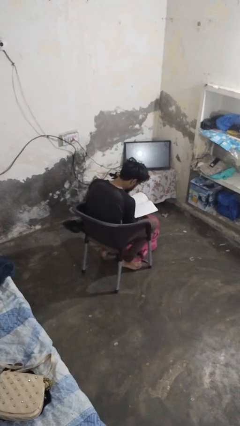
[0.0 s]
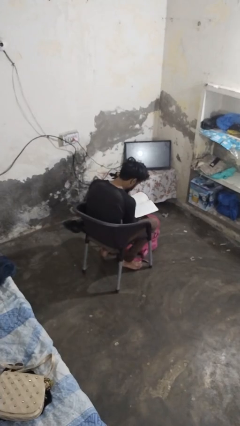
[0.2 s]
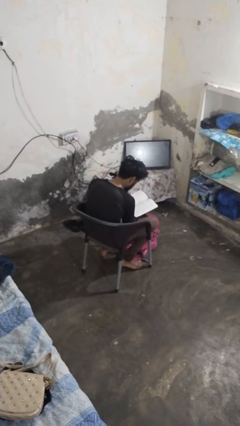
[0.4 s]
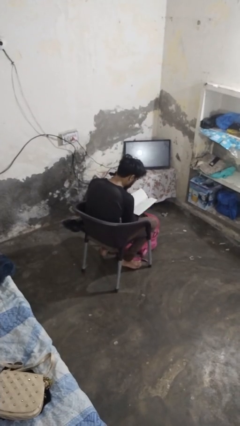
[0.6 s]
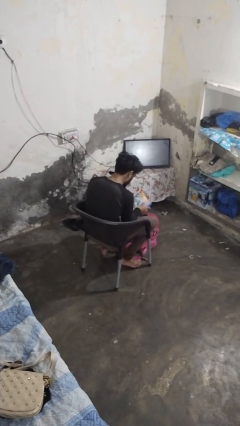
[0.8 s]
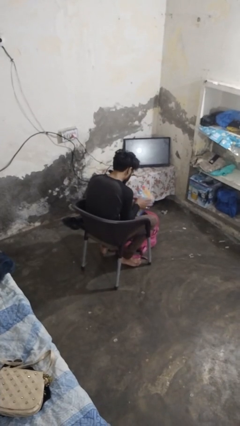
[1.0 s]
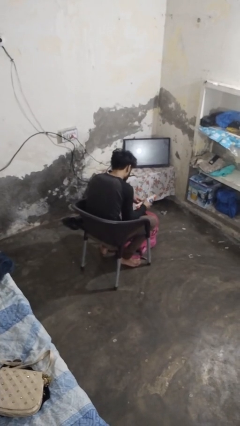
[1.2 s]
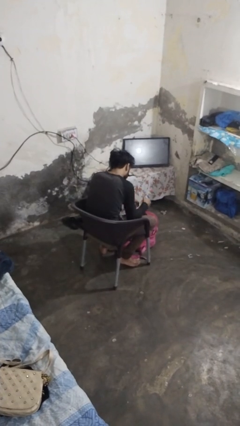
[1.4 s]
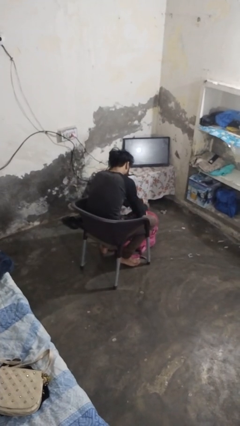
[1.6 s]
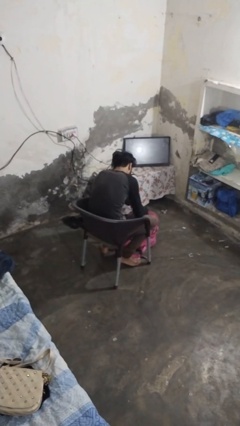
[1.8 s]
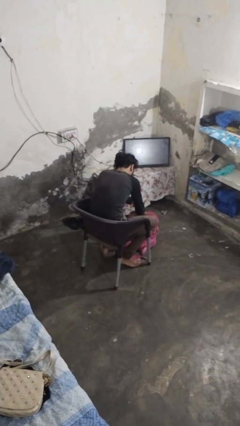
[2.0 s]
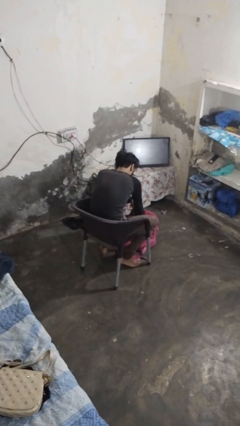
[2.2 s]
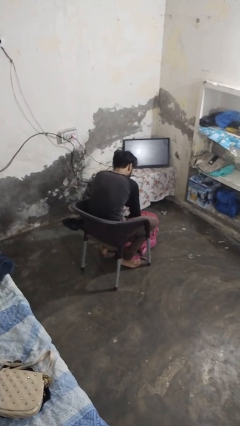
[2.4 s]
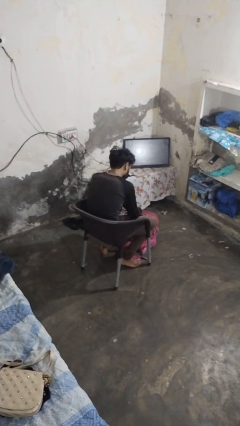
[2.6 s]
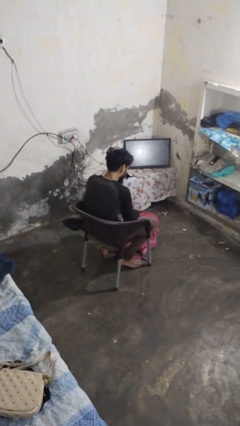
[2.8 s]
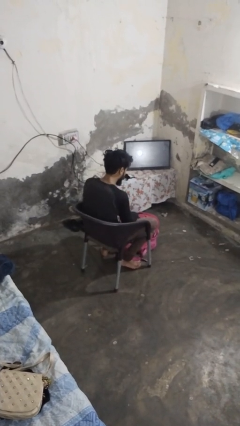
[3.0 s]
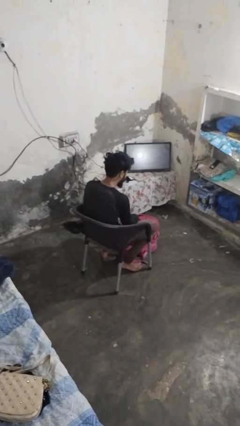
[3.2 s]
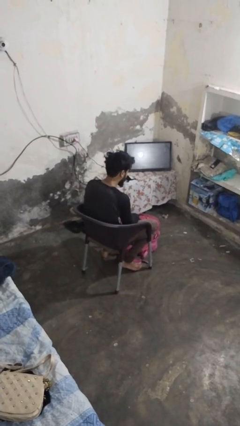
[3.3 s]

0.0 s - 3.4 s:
person puts object into backpack

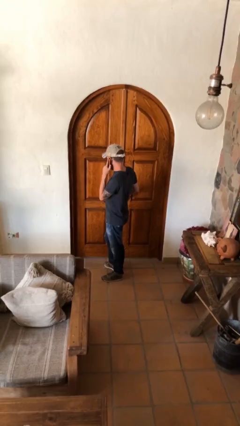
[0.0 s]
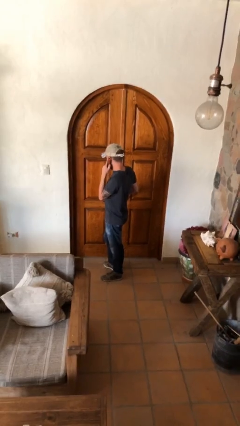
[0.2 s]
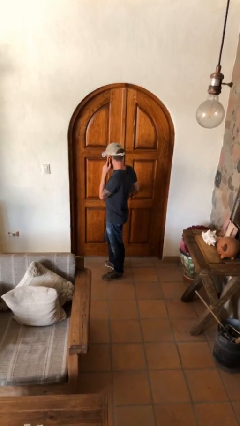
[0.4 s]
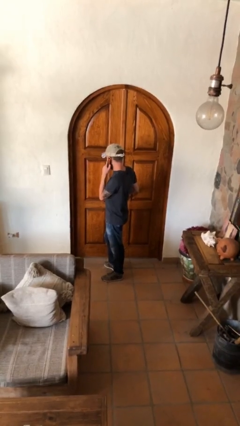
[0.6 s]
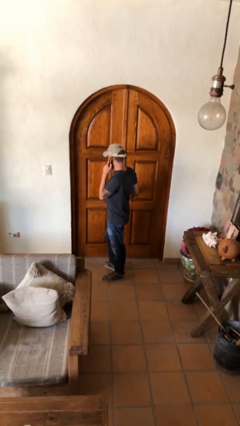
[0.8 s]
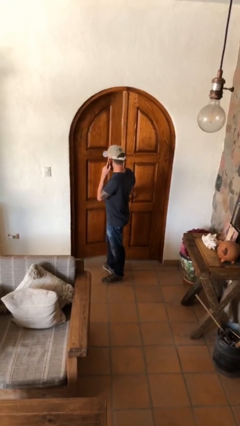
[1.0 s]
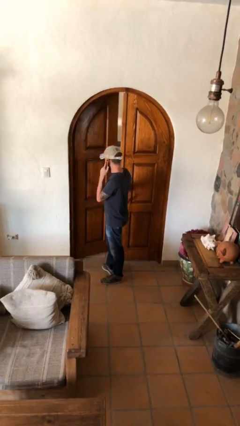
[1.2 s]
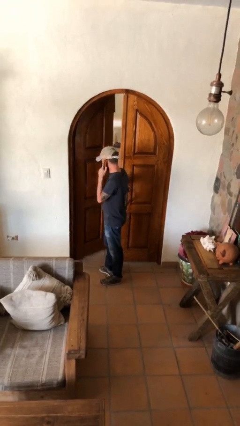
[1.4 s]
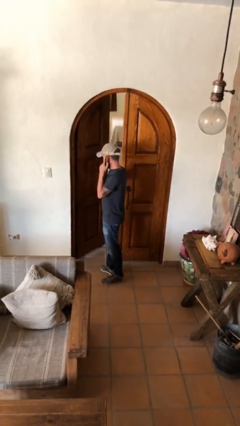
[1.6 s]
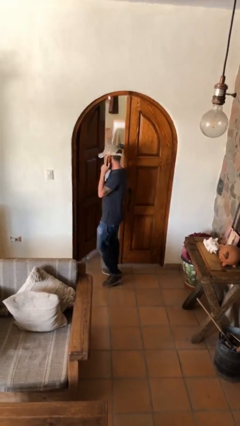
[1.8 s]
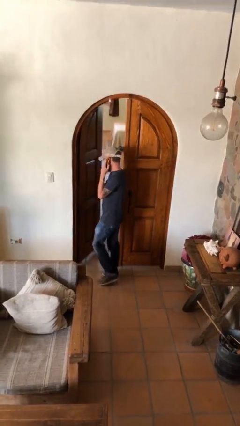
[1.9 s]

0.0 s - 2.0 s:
person opens facility door

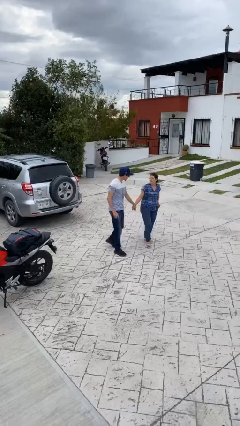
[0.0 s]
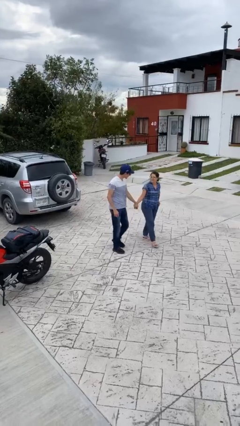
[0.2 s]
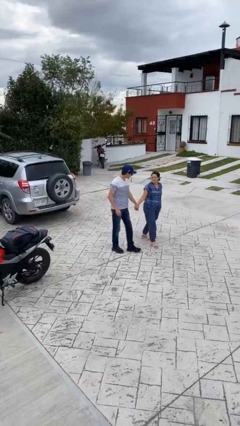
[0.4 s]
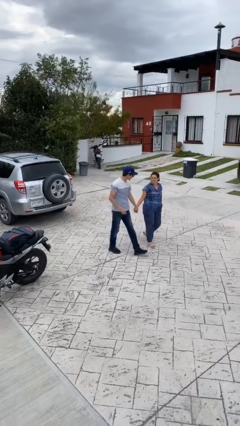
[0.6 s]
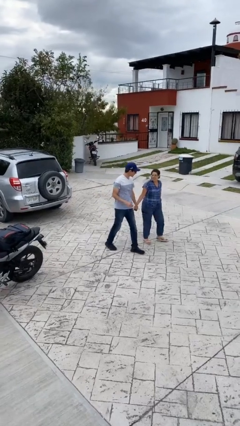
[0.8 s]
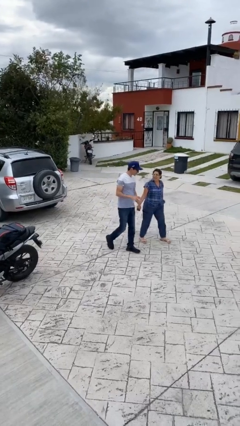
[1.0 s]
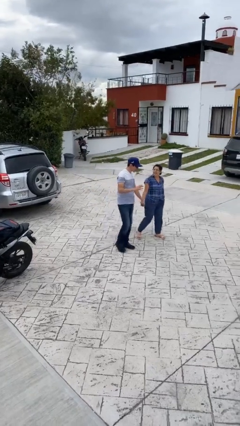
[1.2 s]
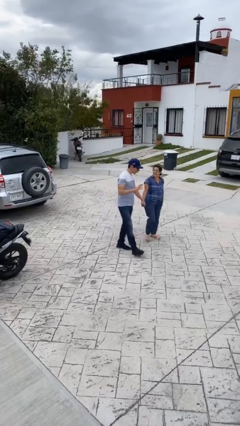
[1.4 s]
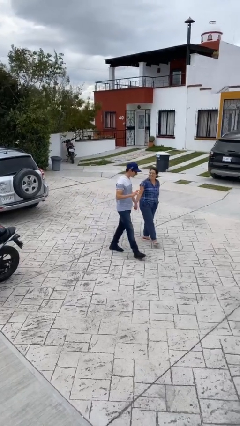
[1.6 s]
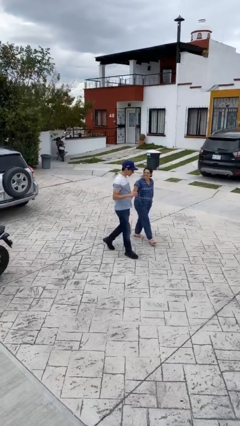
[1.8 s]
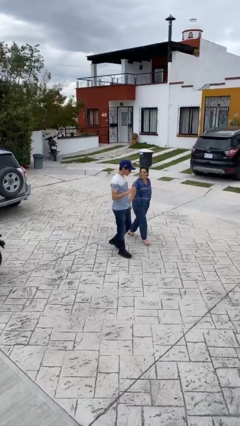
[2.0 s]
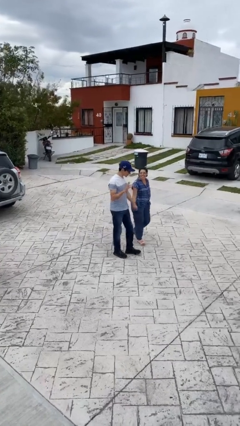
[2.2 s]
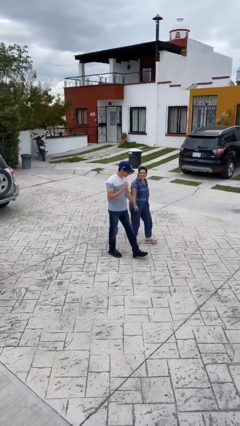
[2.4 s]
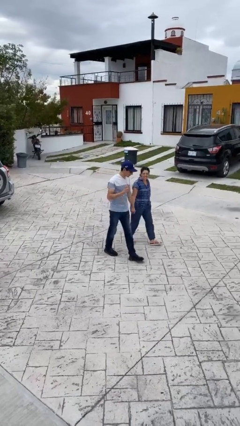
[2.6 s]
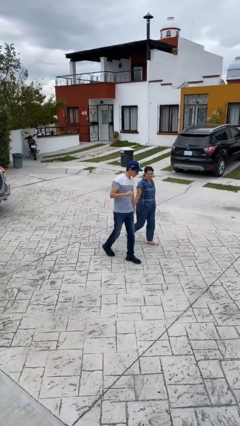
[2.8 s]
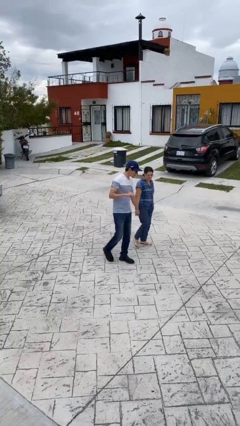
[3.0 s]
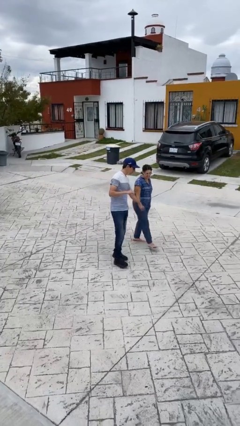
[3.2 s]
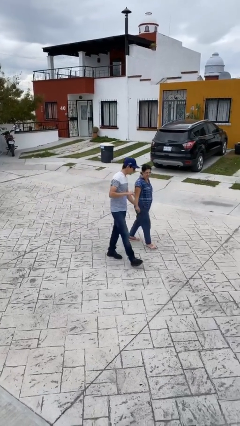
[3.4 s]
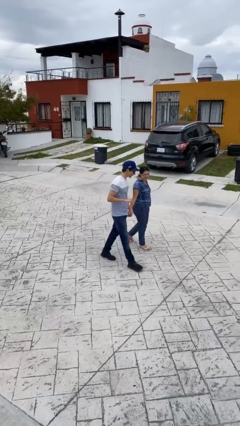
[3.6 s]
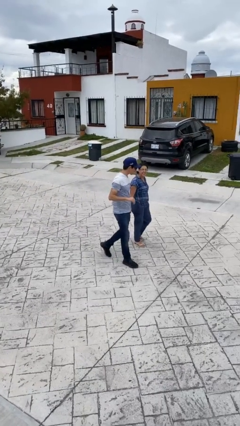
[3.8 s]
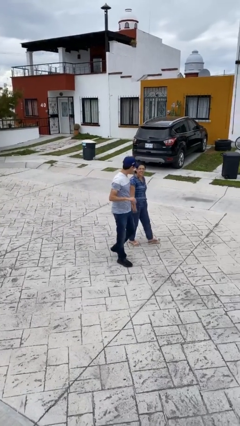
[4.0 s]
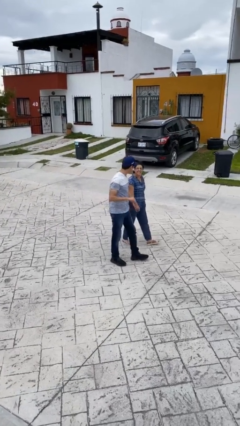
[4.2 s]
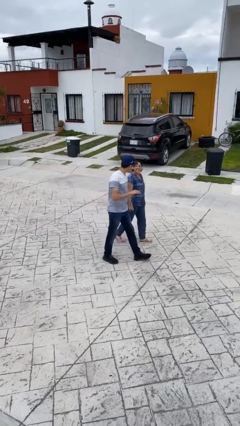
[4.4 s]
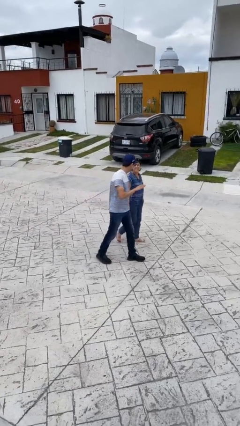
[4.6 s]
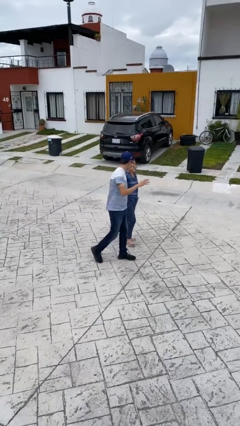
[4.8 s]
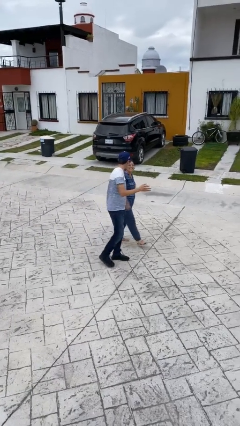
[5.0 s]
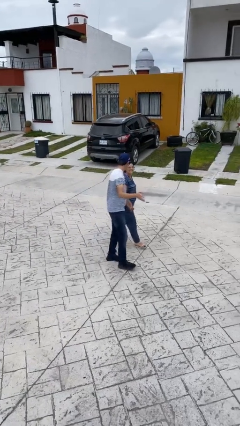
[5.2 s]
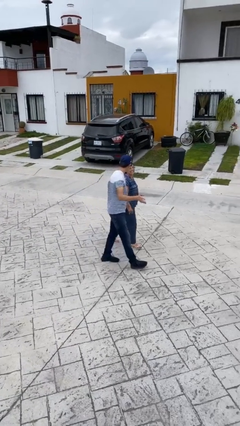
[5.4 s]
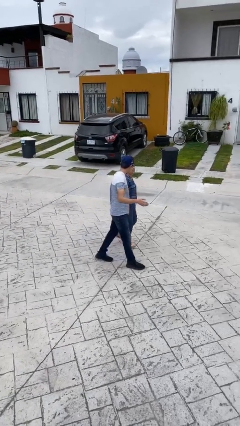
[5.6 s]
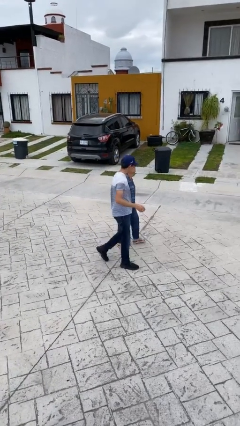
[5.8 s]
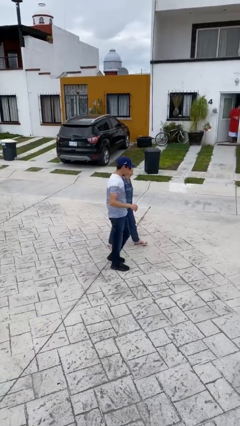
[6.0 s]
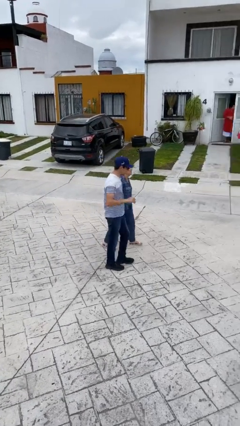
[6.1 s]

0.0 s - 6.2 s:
person holds hand

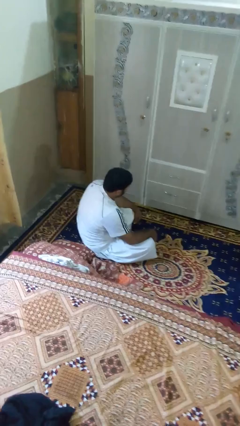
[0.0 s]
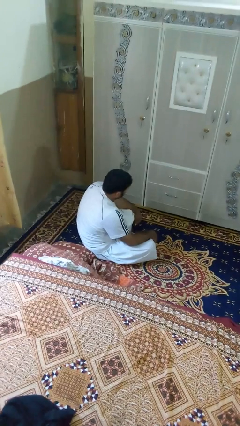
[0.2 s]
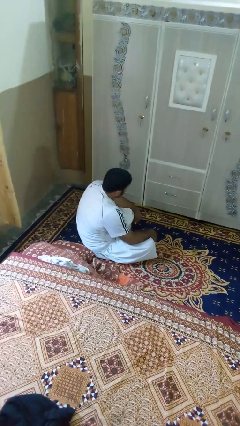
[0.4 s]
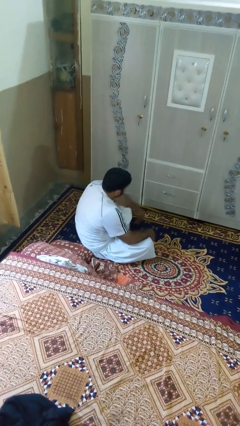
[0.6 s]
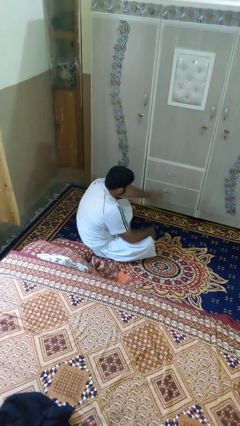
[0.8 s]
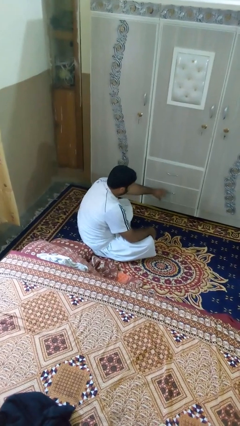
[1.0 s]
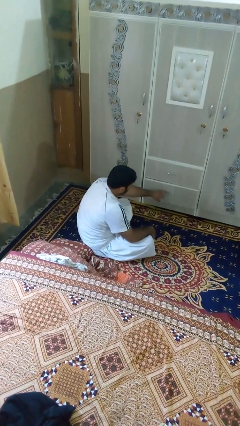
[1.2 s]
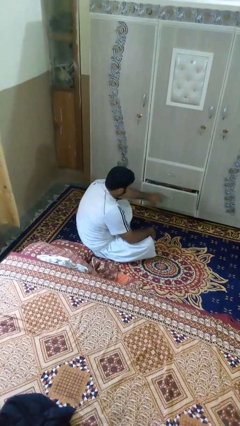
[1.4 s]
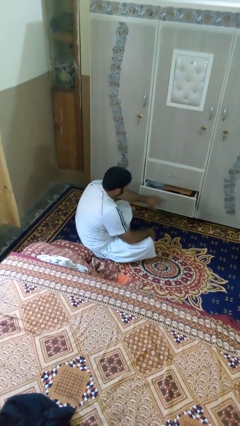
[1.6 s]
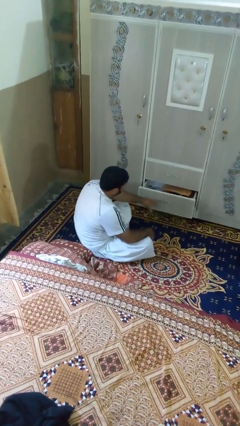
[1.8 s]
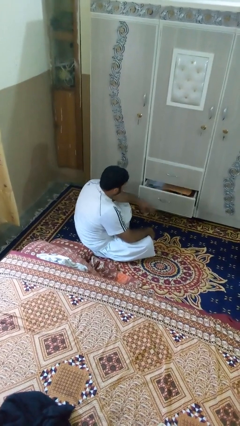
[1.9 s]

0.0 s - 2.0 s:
person opens dresser drawer

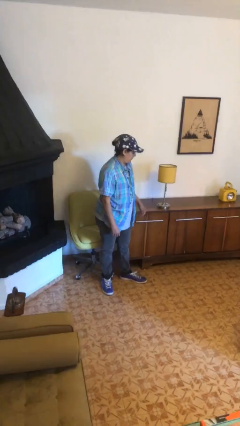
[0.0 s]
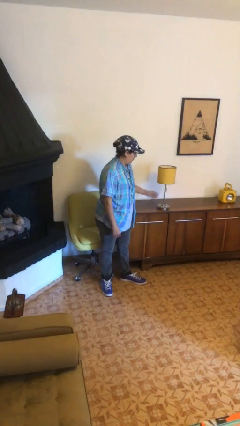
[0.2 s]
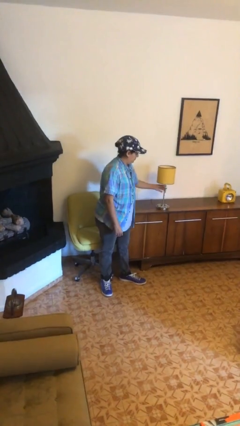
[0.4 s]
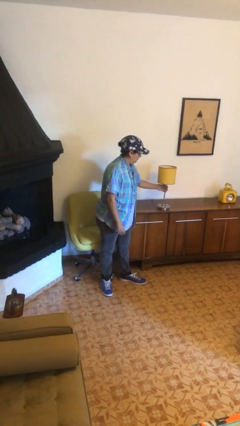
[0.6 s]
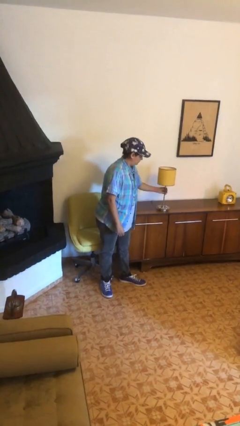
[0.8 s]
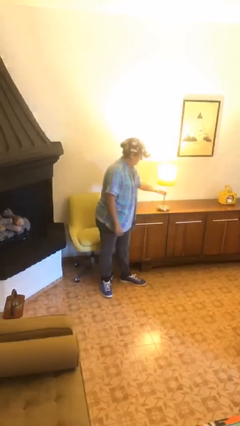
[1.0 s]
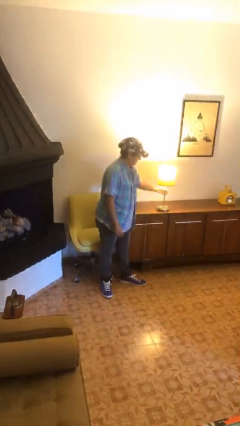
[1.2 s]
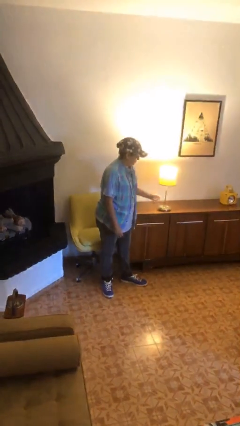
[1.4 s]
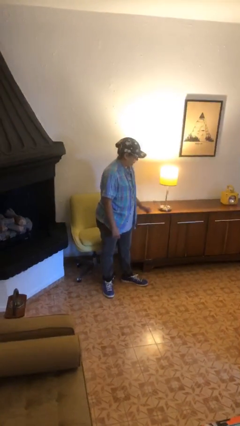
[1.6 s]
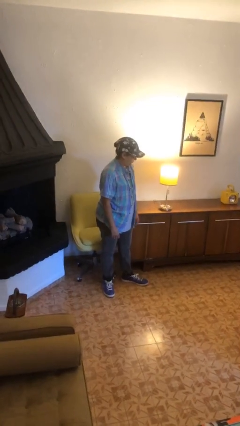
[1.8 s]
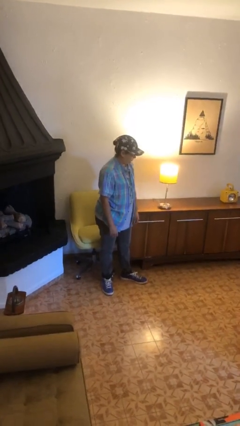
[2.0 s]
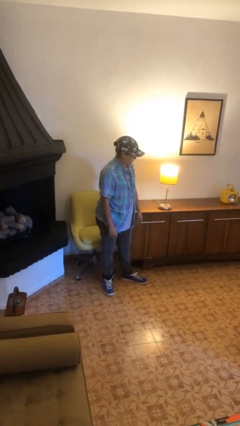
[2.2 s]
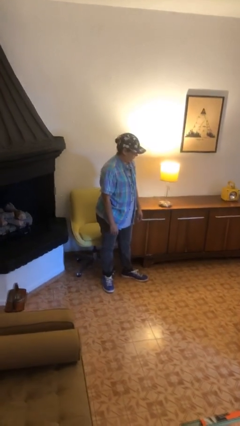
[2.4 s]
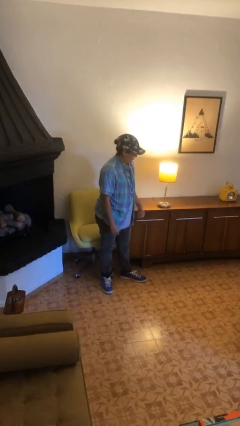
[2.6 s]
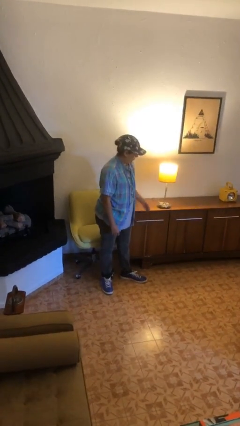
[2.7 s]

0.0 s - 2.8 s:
person turns on lamp

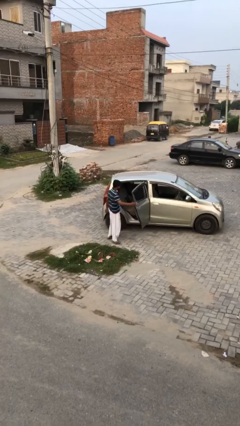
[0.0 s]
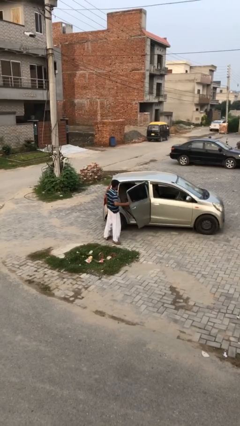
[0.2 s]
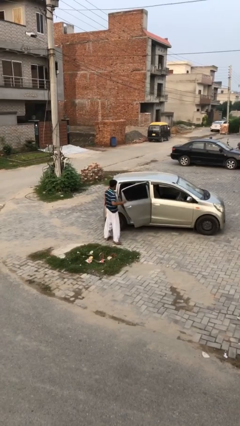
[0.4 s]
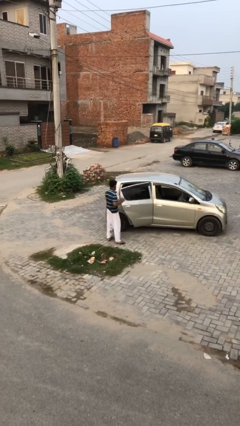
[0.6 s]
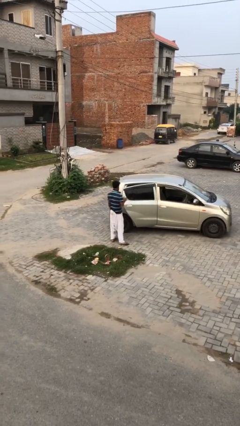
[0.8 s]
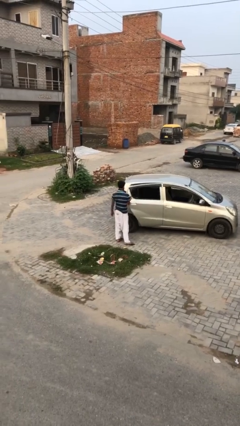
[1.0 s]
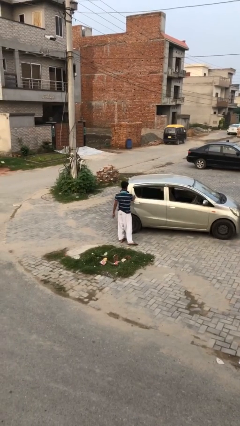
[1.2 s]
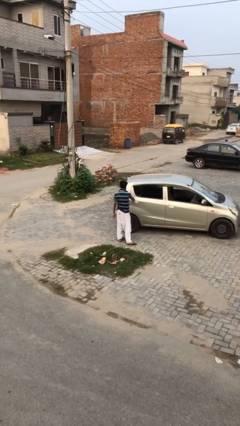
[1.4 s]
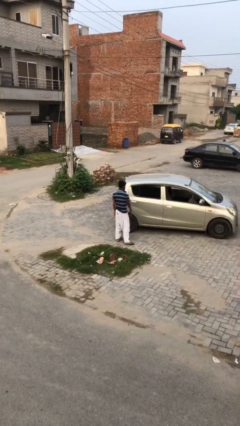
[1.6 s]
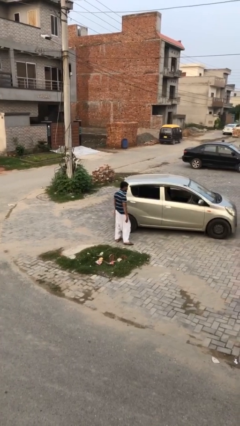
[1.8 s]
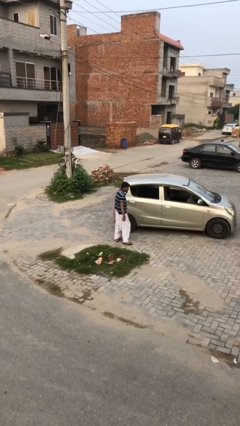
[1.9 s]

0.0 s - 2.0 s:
person closes car door
